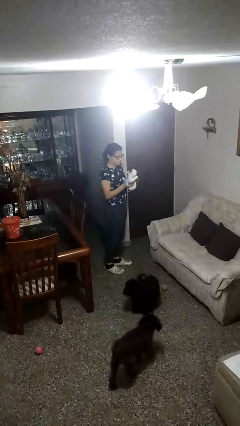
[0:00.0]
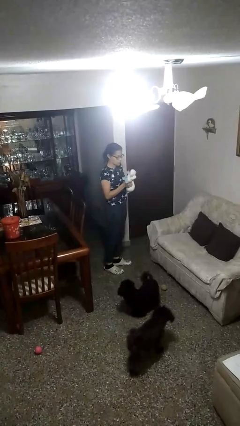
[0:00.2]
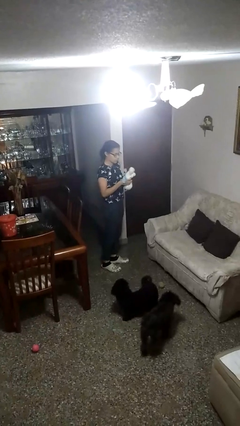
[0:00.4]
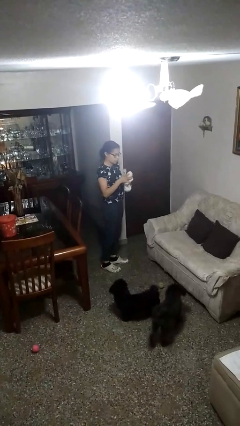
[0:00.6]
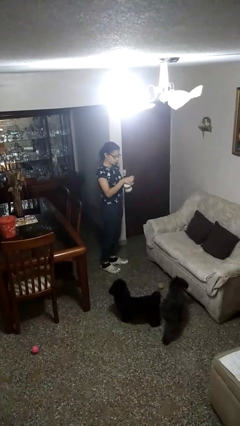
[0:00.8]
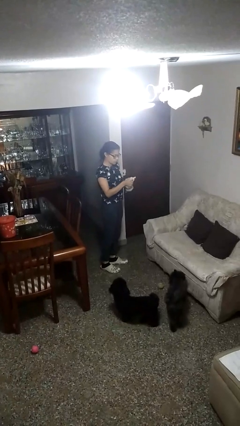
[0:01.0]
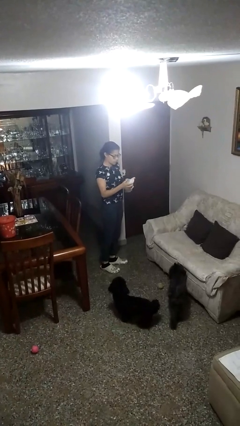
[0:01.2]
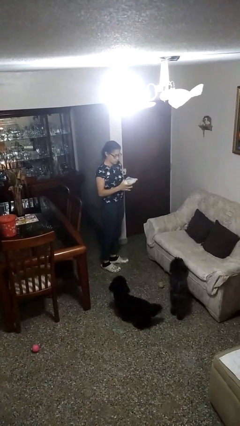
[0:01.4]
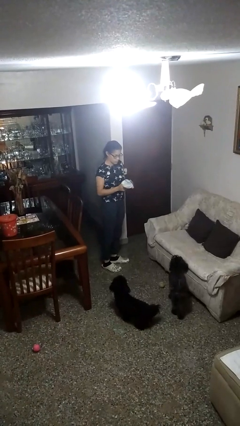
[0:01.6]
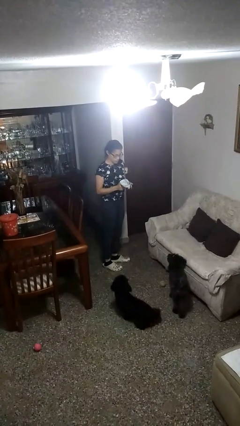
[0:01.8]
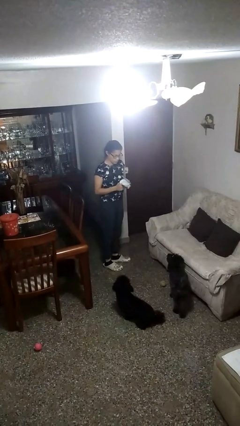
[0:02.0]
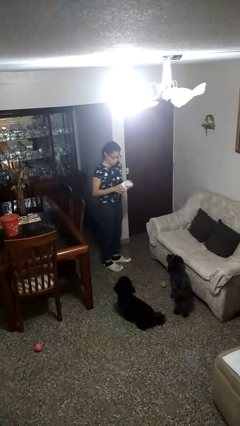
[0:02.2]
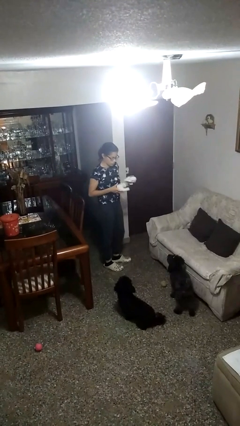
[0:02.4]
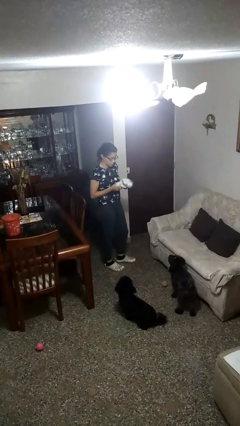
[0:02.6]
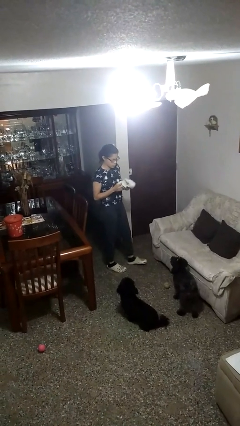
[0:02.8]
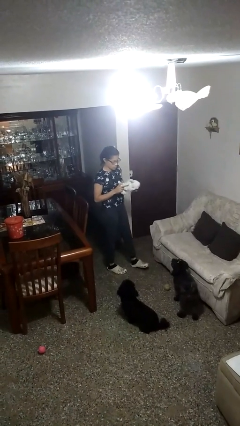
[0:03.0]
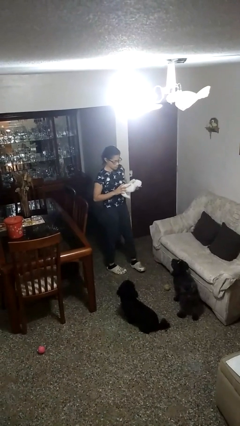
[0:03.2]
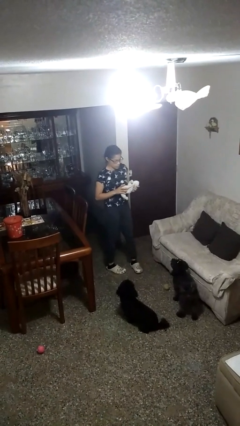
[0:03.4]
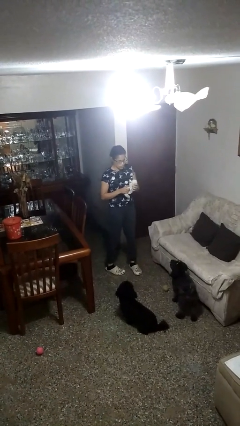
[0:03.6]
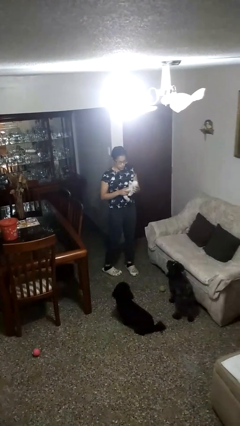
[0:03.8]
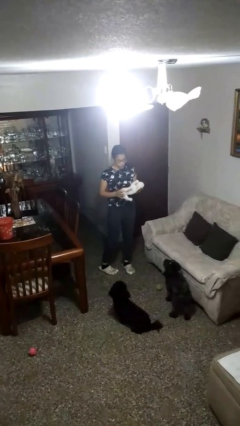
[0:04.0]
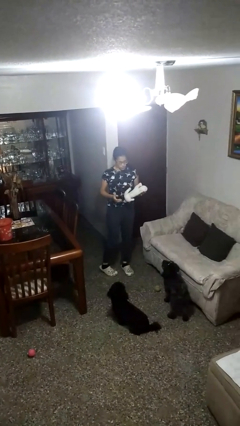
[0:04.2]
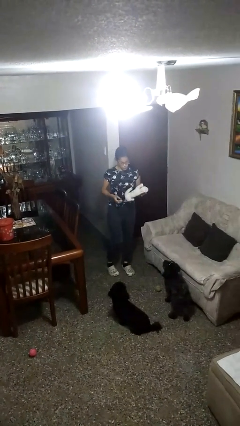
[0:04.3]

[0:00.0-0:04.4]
person squeezes object

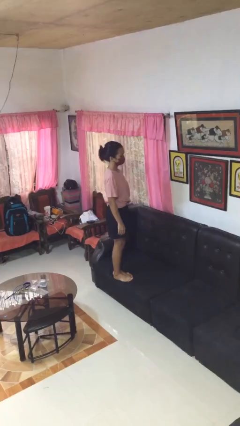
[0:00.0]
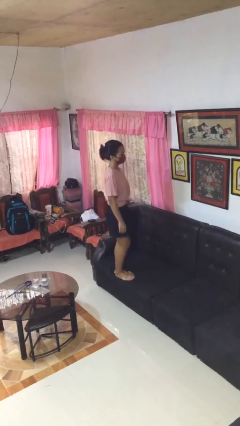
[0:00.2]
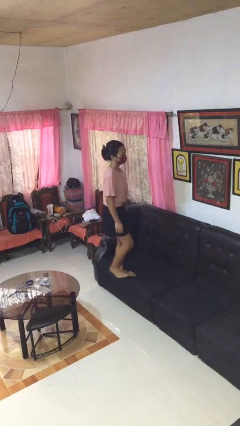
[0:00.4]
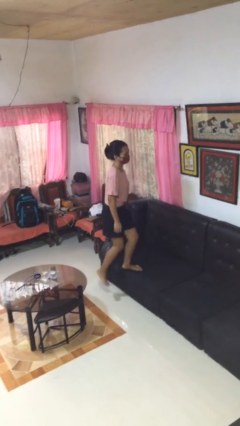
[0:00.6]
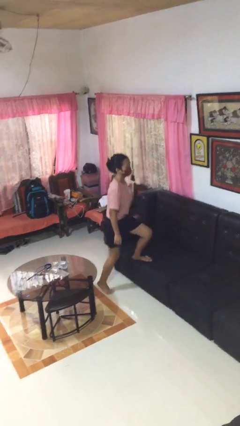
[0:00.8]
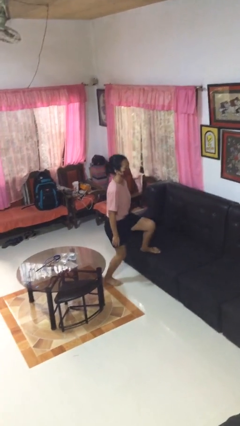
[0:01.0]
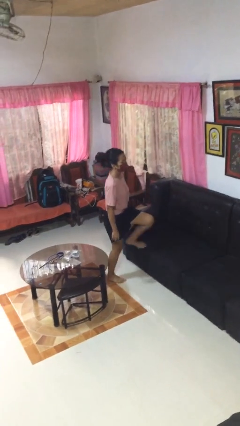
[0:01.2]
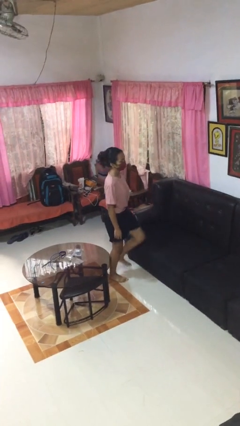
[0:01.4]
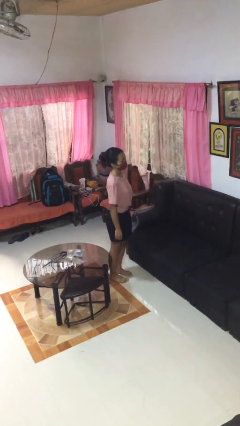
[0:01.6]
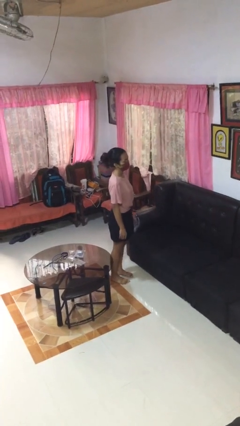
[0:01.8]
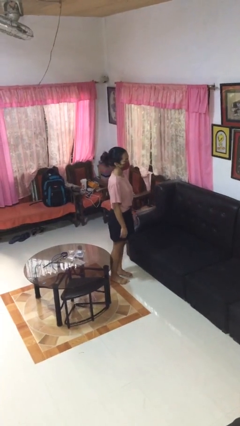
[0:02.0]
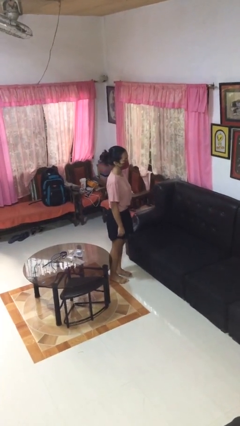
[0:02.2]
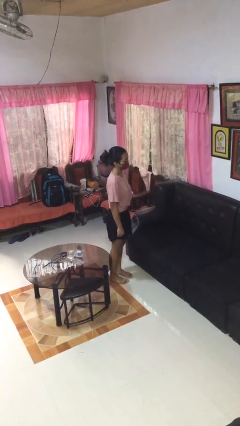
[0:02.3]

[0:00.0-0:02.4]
person climbs off couch

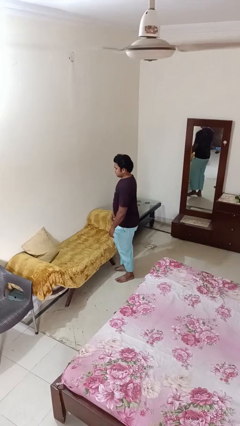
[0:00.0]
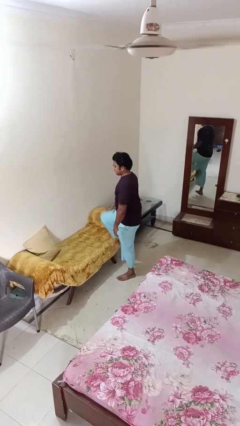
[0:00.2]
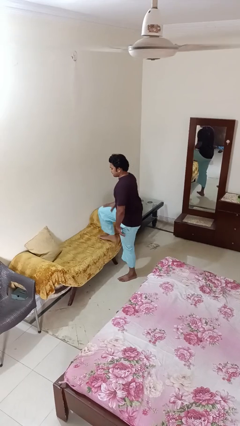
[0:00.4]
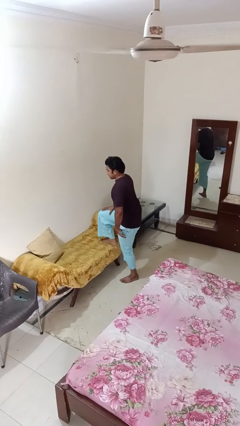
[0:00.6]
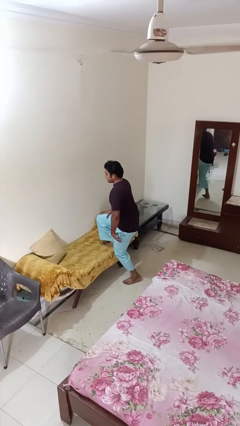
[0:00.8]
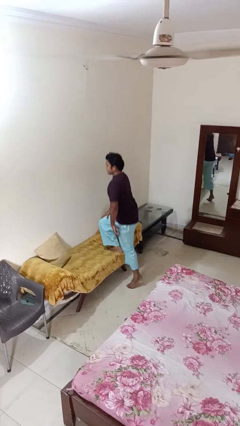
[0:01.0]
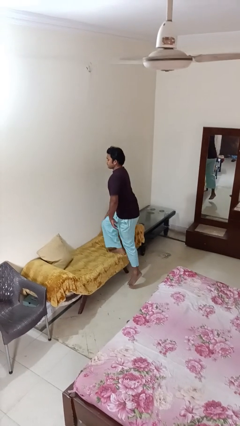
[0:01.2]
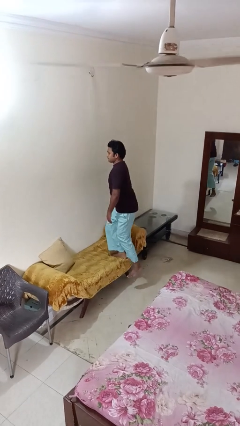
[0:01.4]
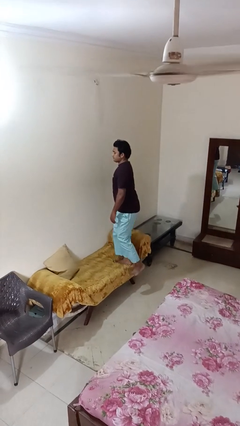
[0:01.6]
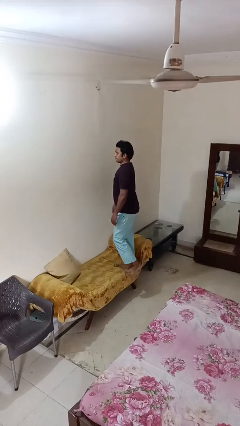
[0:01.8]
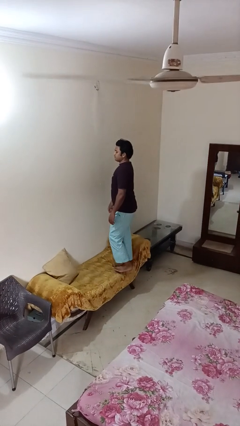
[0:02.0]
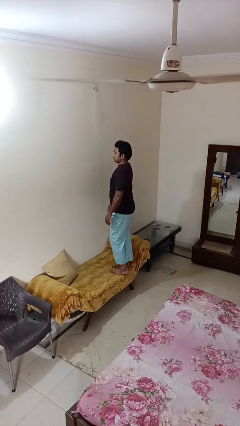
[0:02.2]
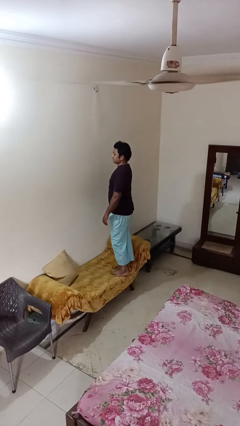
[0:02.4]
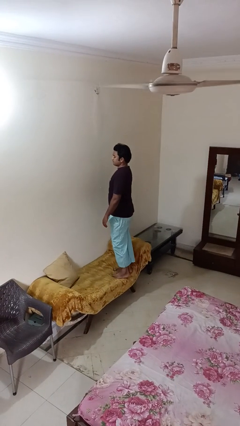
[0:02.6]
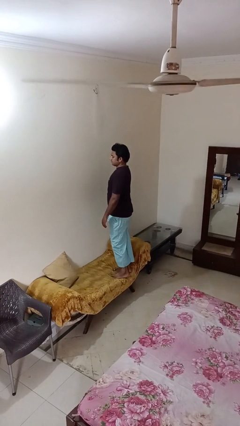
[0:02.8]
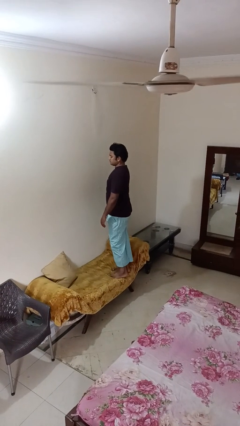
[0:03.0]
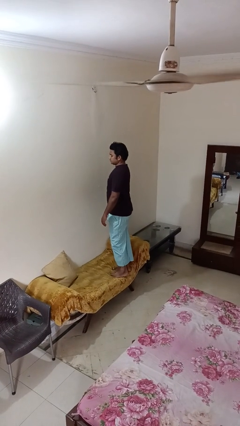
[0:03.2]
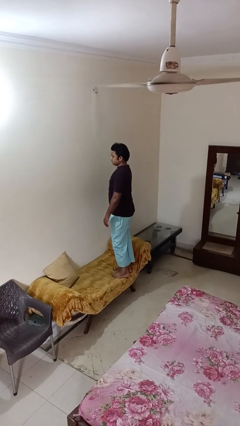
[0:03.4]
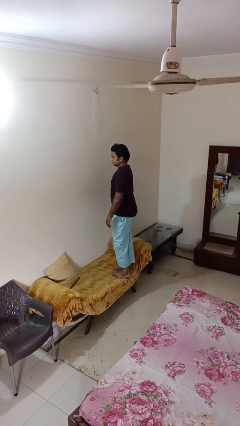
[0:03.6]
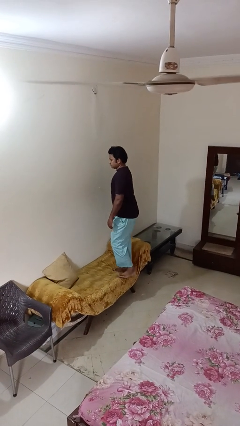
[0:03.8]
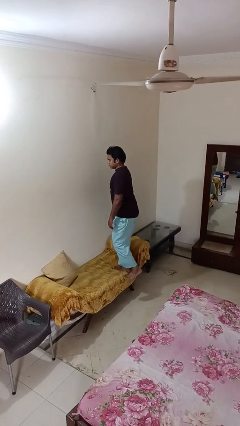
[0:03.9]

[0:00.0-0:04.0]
person climbs on couch

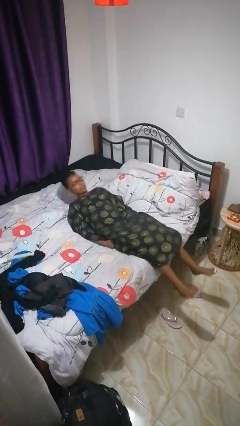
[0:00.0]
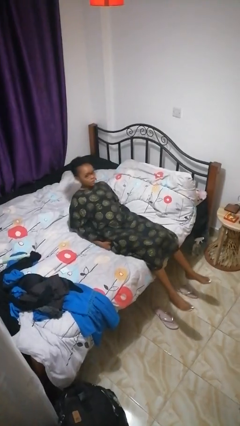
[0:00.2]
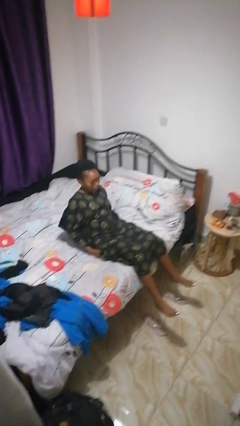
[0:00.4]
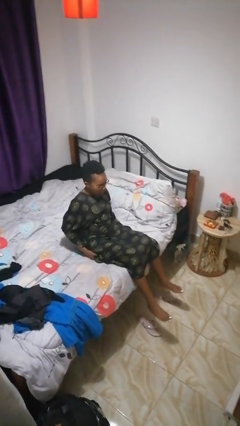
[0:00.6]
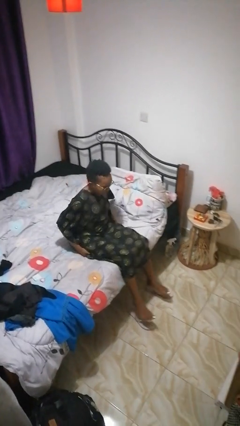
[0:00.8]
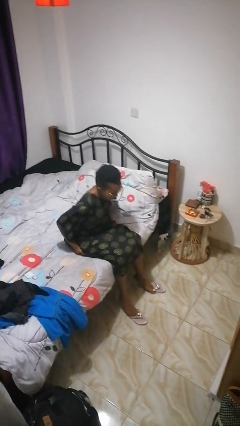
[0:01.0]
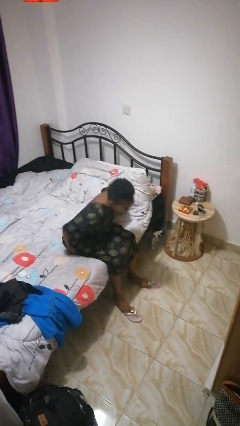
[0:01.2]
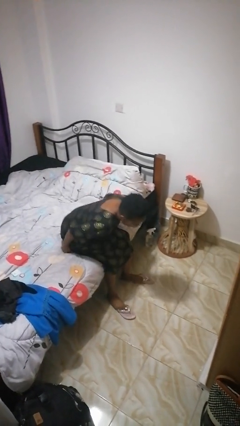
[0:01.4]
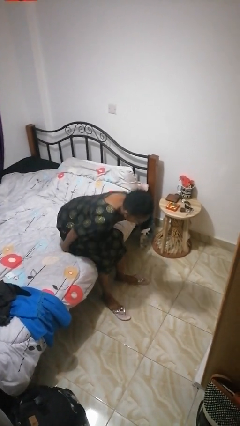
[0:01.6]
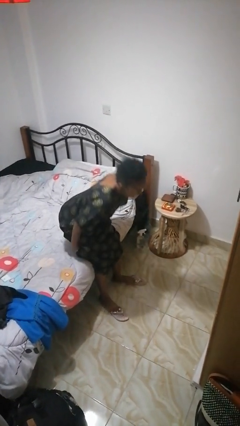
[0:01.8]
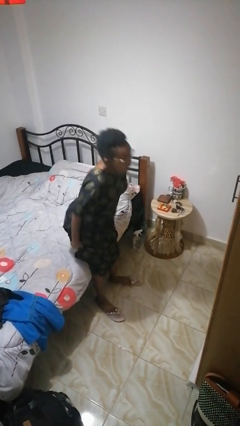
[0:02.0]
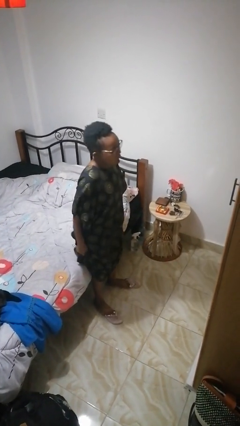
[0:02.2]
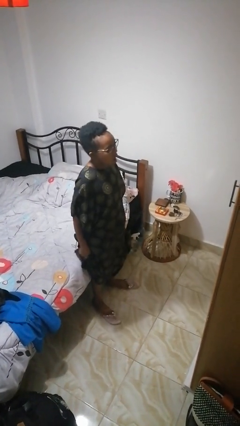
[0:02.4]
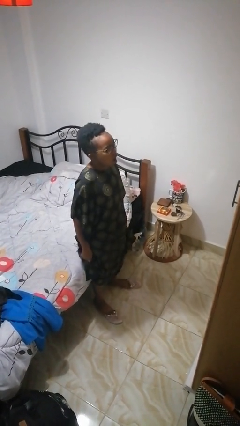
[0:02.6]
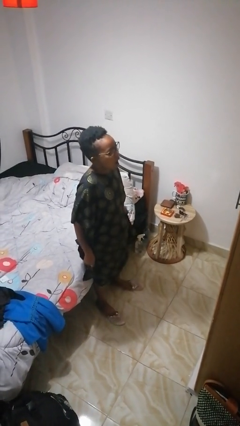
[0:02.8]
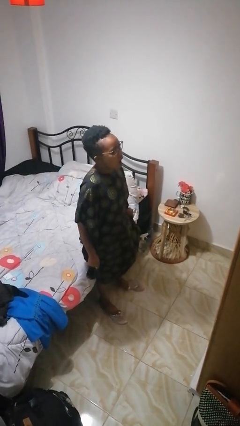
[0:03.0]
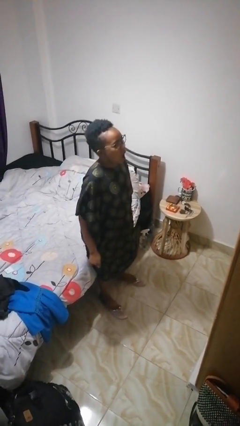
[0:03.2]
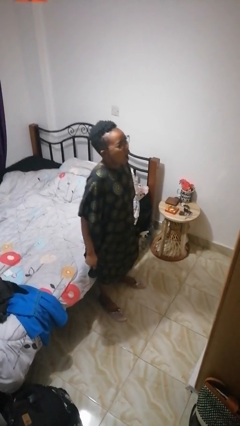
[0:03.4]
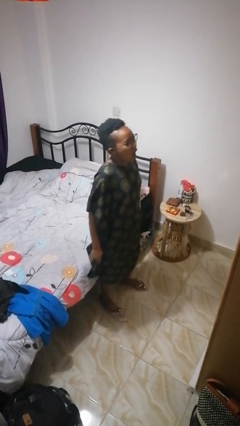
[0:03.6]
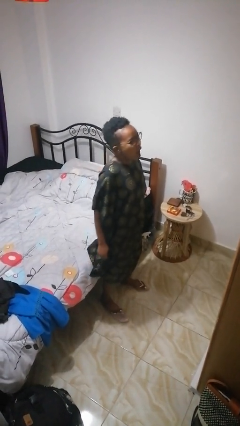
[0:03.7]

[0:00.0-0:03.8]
person stands up

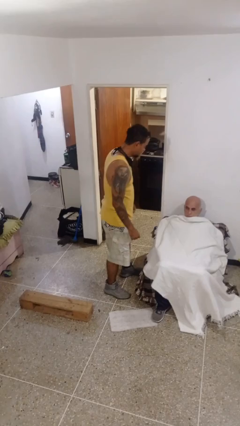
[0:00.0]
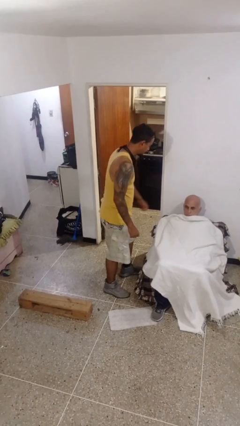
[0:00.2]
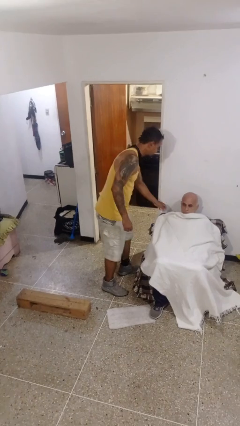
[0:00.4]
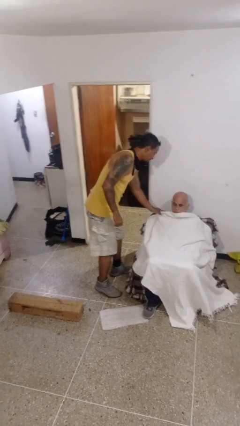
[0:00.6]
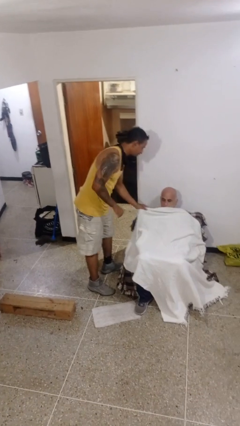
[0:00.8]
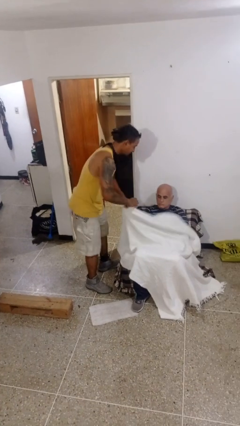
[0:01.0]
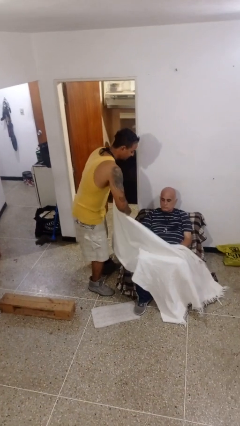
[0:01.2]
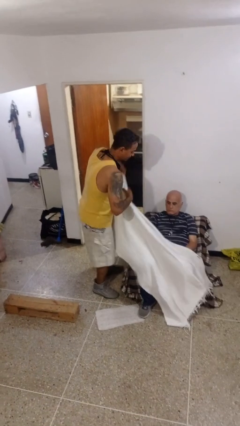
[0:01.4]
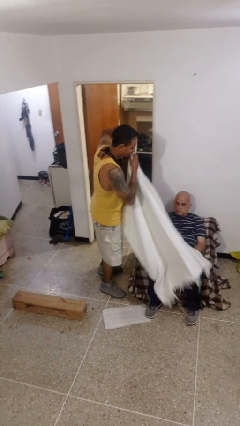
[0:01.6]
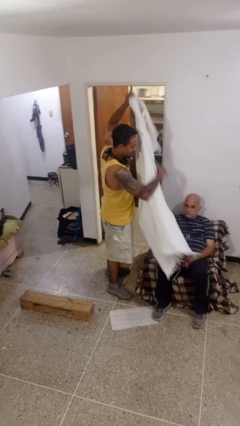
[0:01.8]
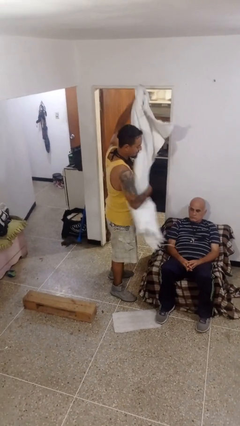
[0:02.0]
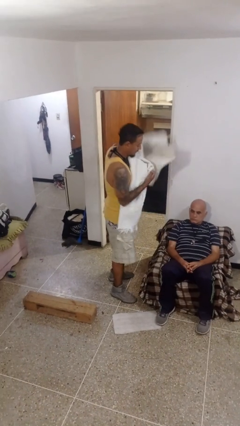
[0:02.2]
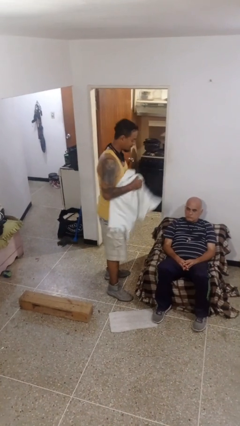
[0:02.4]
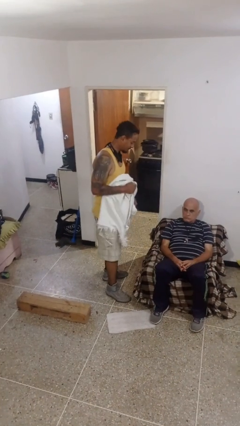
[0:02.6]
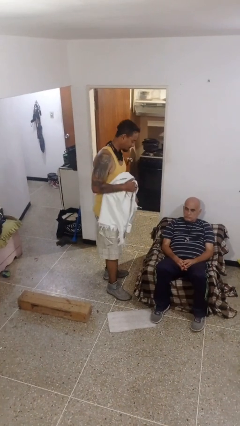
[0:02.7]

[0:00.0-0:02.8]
person uncovers friend with blanket
